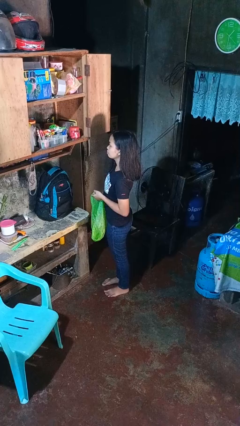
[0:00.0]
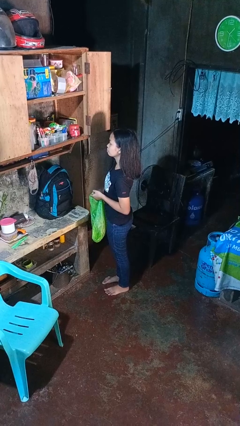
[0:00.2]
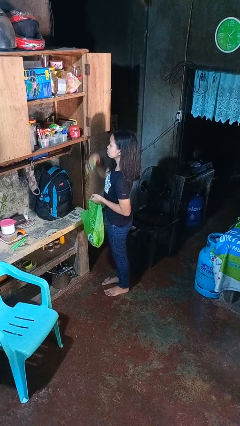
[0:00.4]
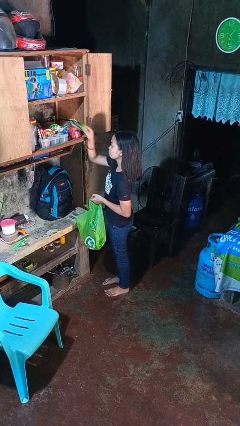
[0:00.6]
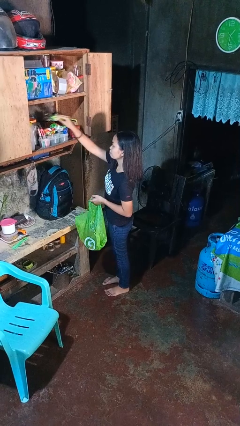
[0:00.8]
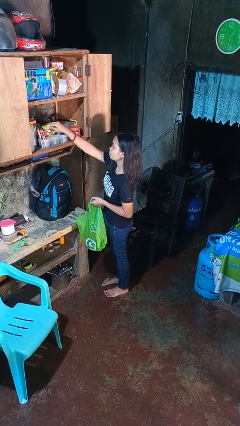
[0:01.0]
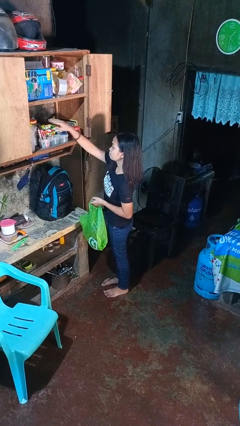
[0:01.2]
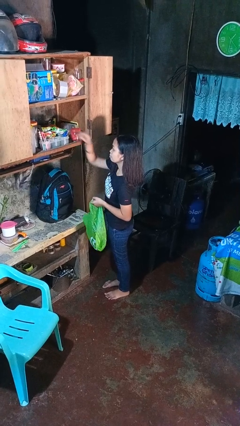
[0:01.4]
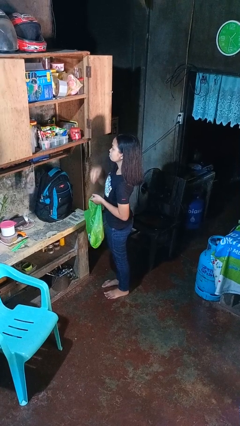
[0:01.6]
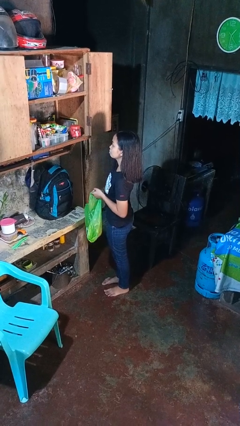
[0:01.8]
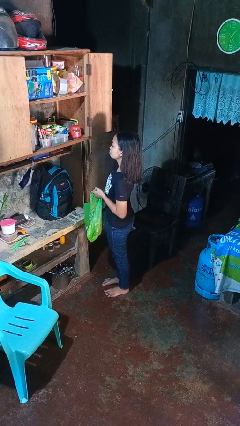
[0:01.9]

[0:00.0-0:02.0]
person loads groceries into cabinet

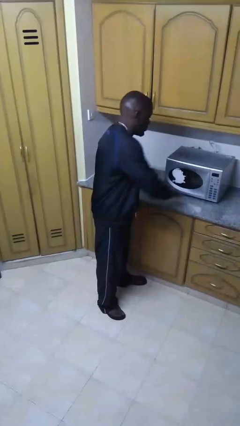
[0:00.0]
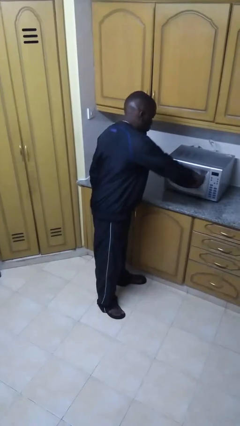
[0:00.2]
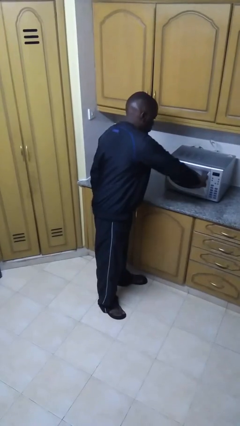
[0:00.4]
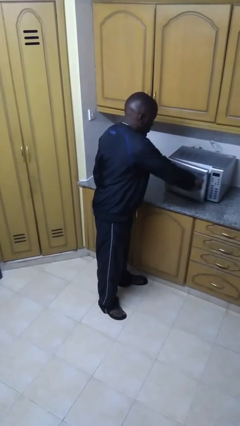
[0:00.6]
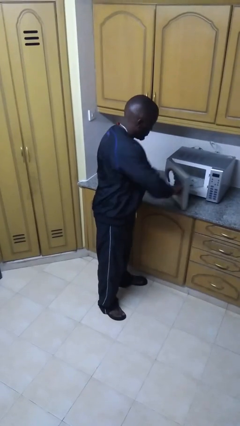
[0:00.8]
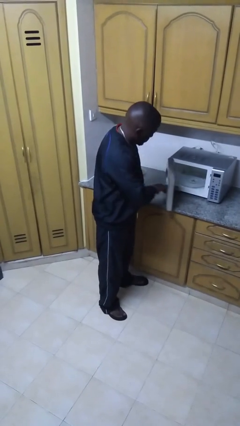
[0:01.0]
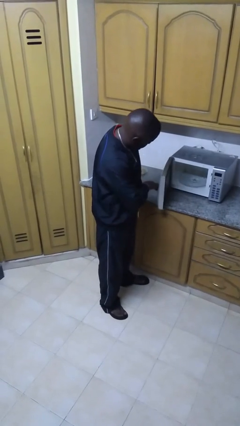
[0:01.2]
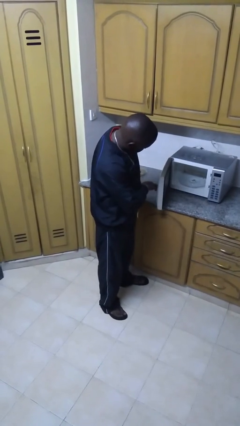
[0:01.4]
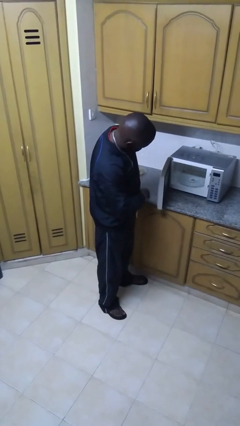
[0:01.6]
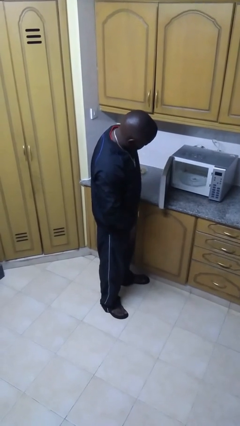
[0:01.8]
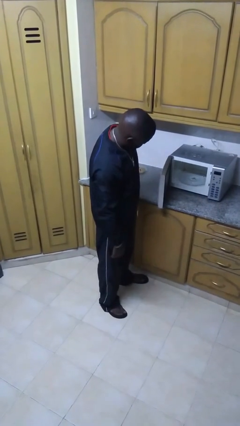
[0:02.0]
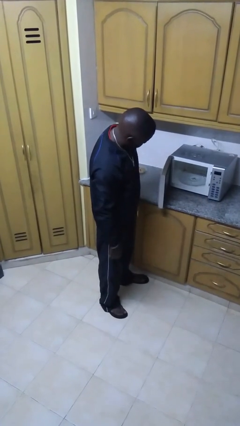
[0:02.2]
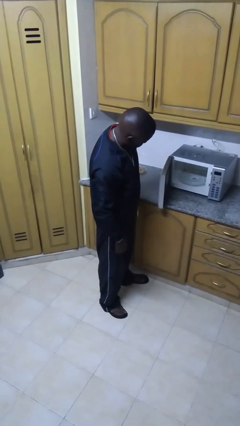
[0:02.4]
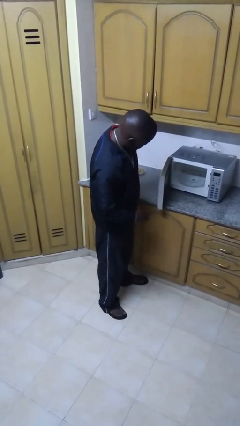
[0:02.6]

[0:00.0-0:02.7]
person opens microwave

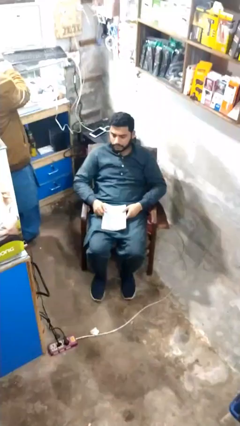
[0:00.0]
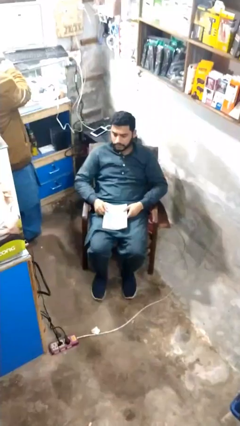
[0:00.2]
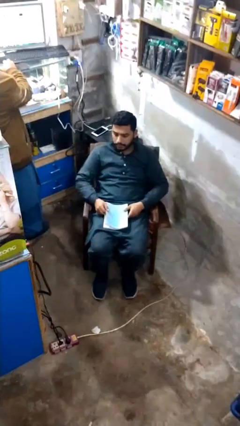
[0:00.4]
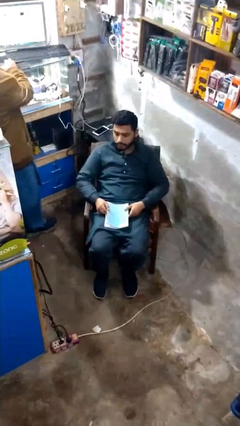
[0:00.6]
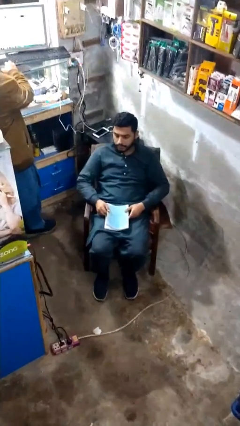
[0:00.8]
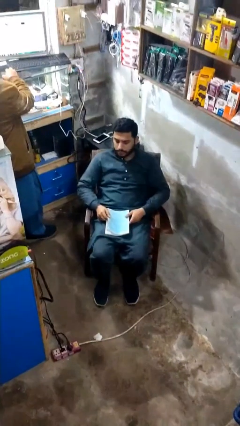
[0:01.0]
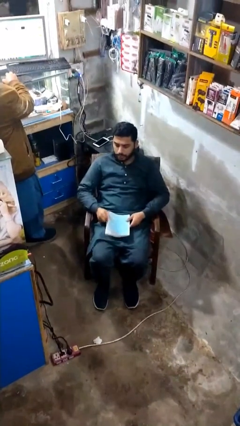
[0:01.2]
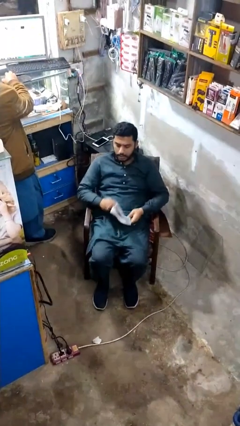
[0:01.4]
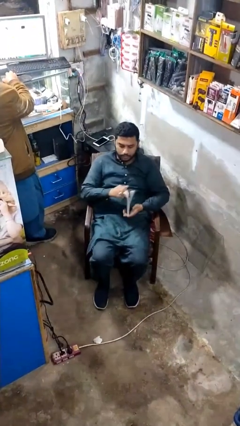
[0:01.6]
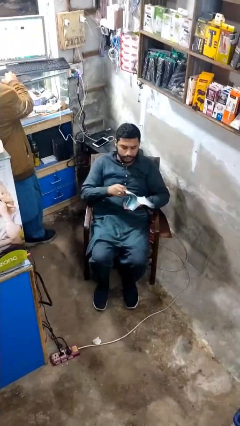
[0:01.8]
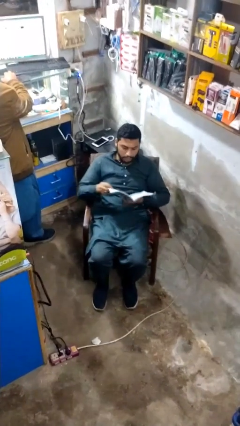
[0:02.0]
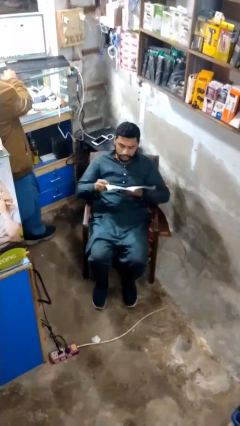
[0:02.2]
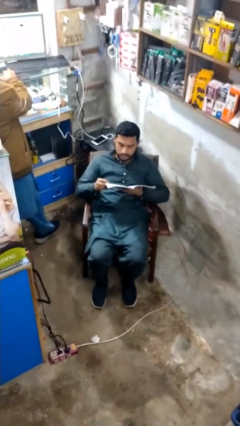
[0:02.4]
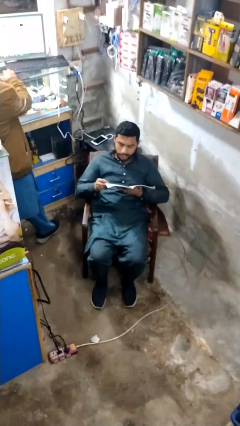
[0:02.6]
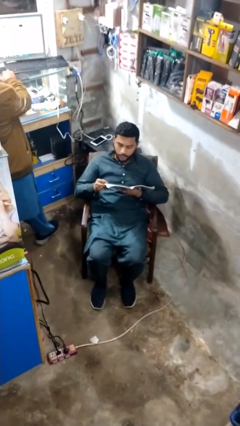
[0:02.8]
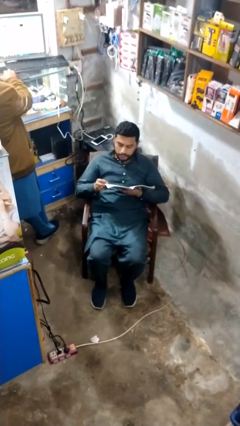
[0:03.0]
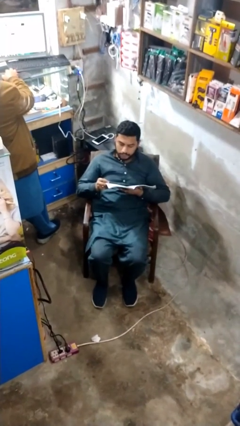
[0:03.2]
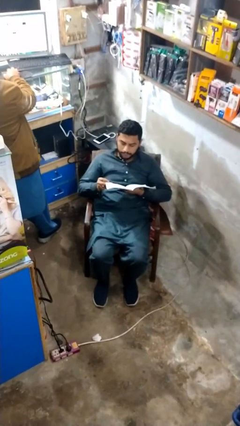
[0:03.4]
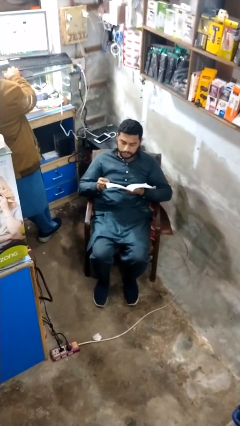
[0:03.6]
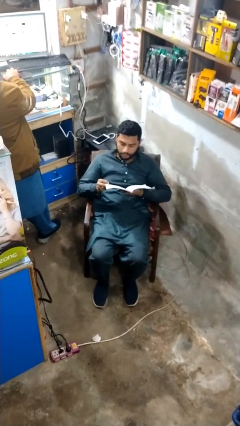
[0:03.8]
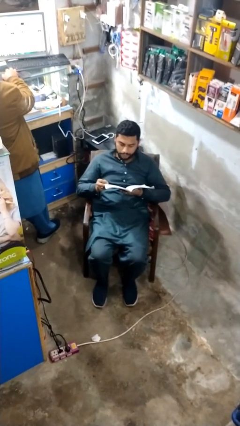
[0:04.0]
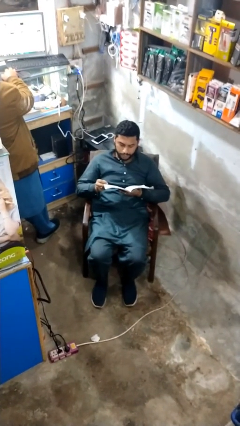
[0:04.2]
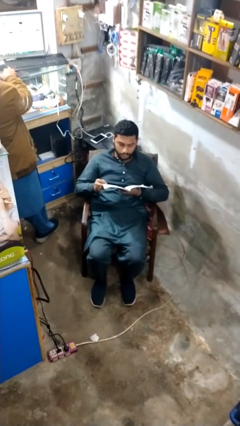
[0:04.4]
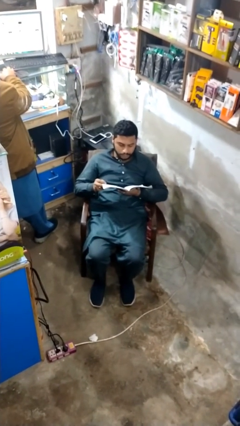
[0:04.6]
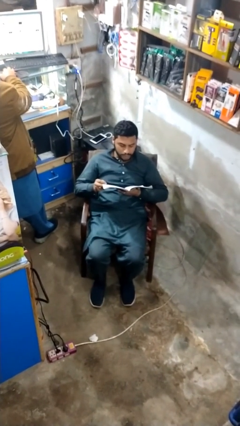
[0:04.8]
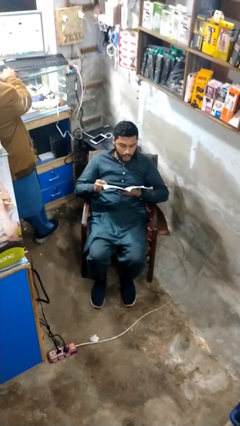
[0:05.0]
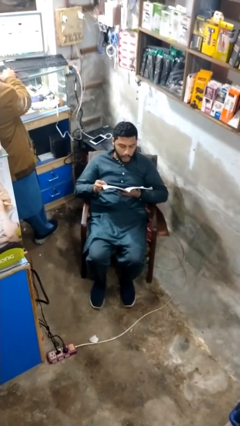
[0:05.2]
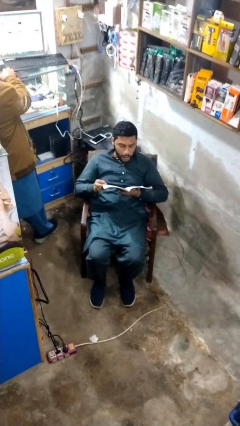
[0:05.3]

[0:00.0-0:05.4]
person reads document

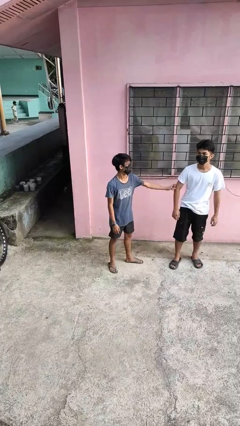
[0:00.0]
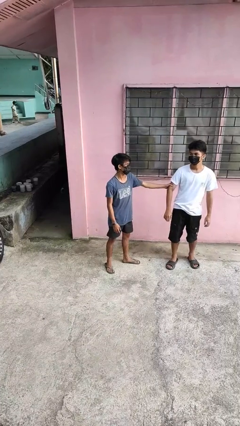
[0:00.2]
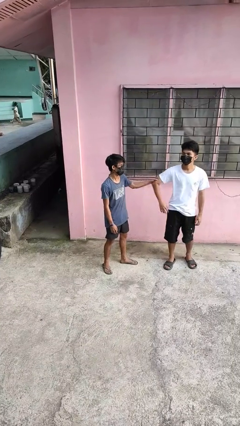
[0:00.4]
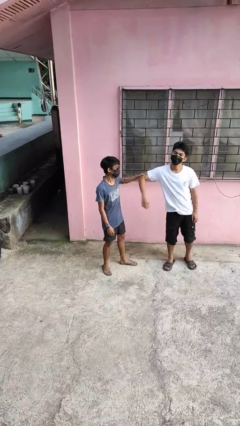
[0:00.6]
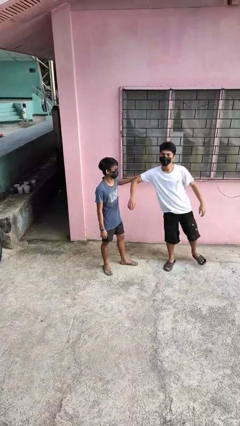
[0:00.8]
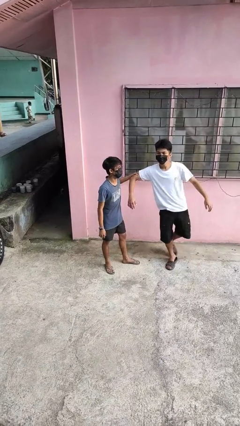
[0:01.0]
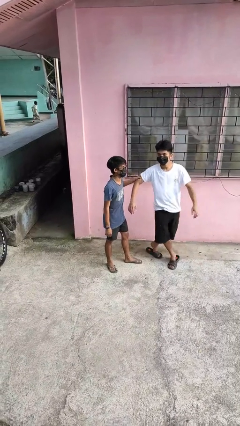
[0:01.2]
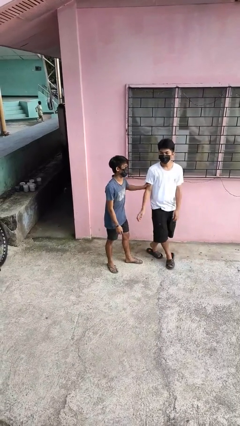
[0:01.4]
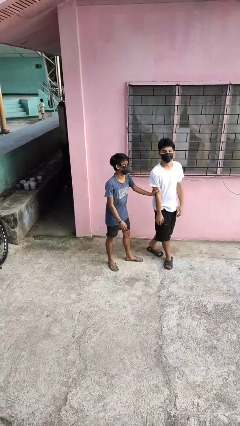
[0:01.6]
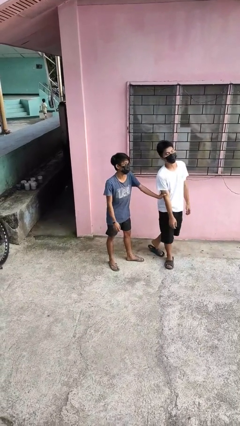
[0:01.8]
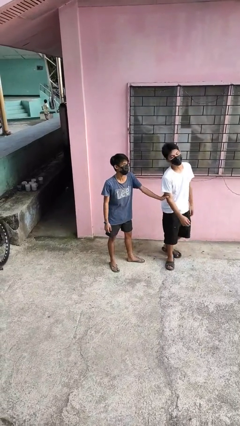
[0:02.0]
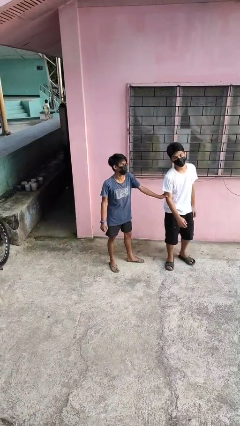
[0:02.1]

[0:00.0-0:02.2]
person grabs person by bicep

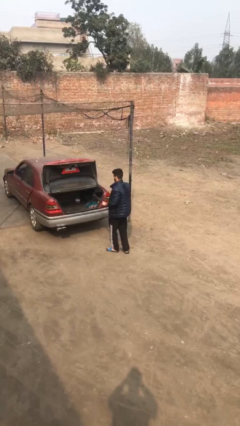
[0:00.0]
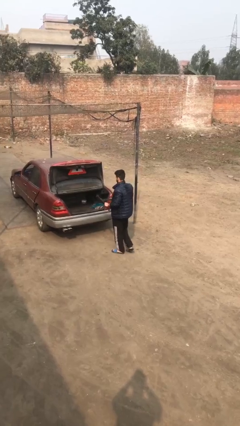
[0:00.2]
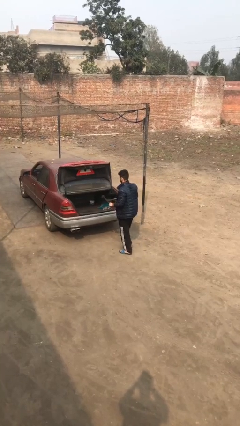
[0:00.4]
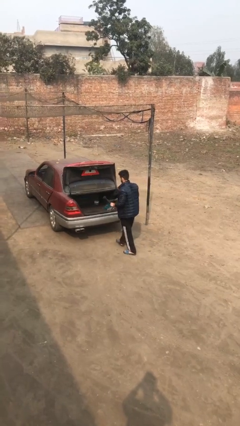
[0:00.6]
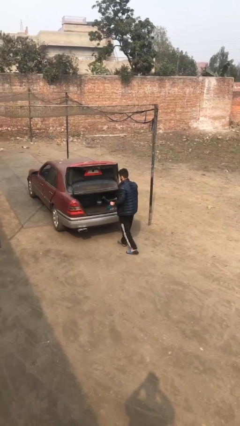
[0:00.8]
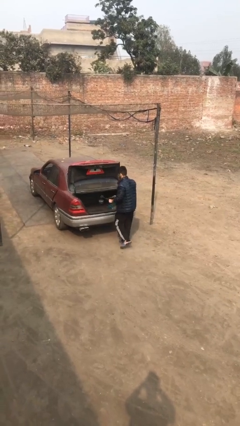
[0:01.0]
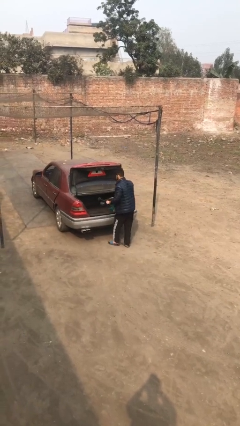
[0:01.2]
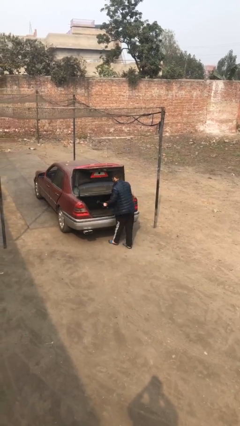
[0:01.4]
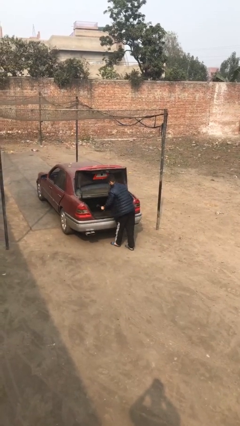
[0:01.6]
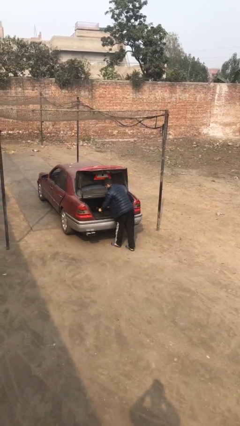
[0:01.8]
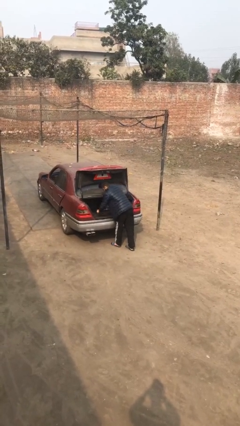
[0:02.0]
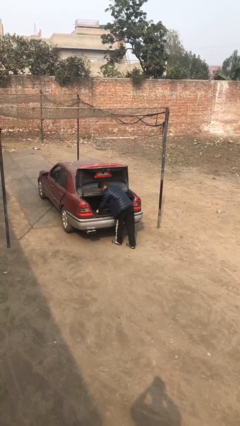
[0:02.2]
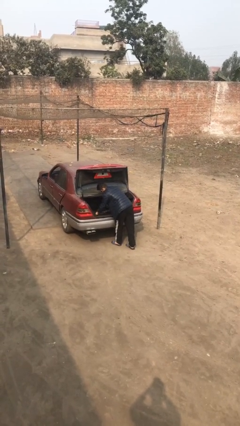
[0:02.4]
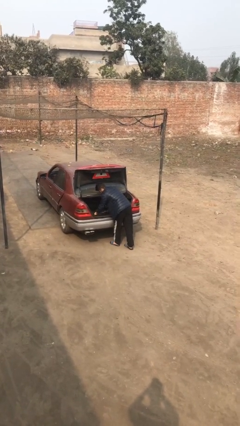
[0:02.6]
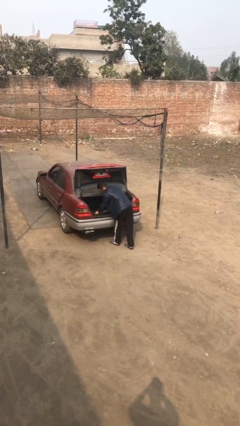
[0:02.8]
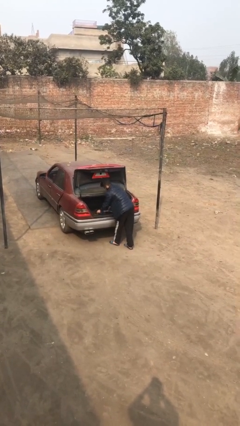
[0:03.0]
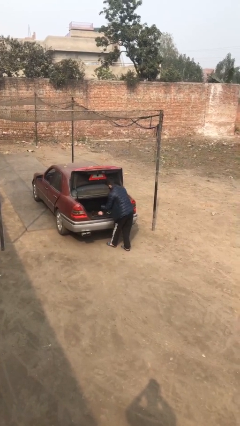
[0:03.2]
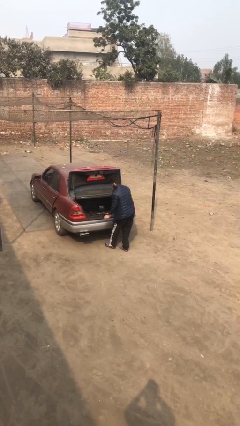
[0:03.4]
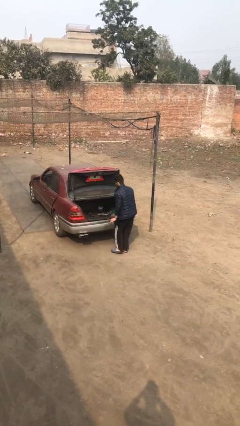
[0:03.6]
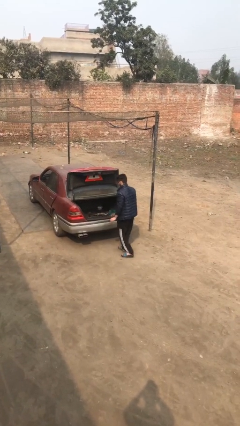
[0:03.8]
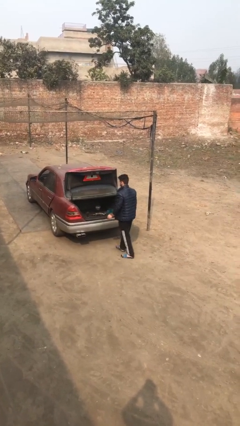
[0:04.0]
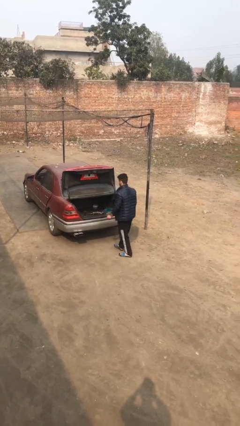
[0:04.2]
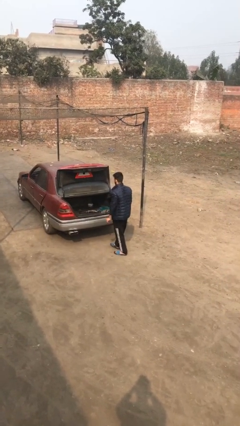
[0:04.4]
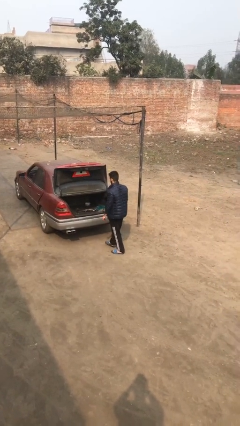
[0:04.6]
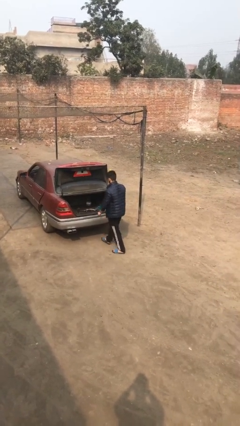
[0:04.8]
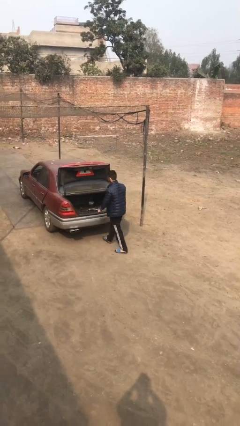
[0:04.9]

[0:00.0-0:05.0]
person loads car
